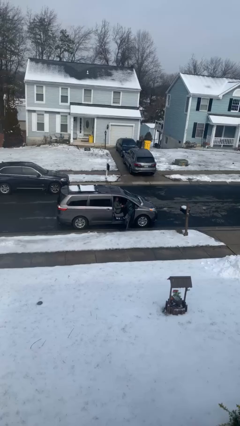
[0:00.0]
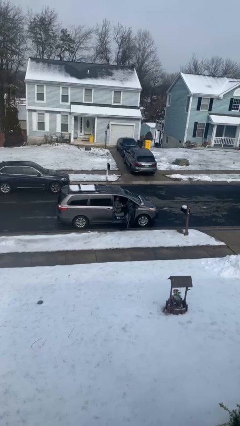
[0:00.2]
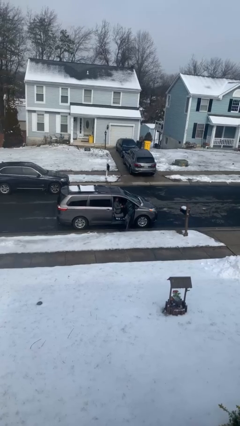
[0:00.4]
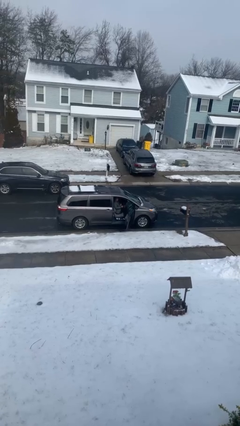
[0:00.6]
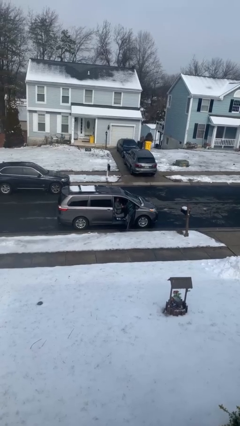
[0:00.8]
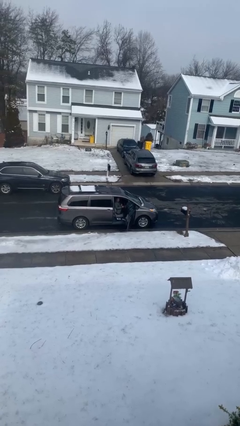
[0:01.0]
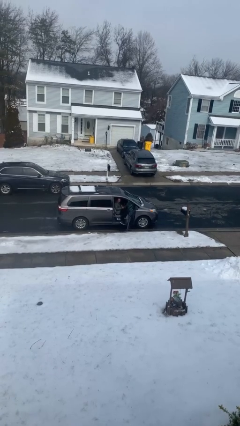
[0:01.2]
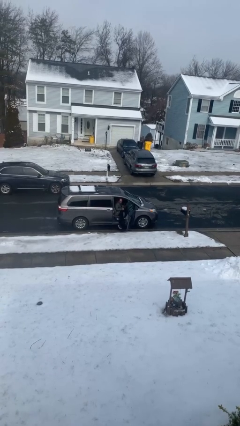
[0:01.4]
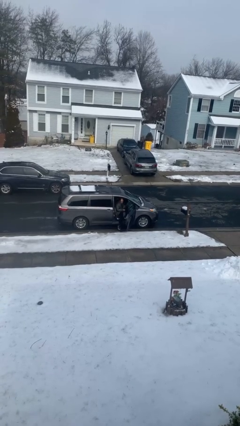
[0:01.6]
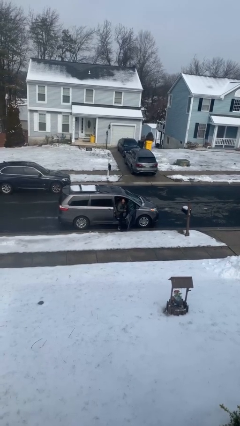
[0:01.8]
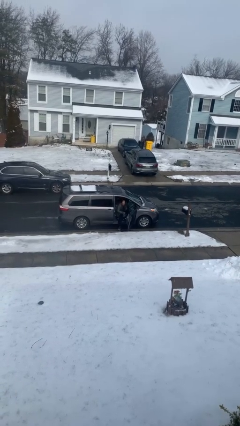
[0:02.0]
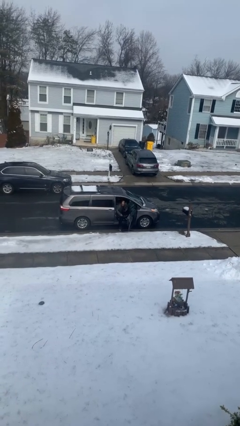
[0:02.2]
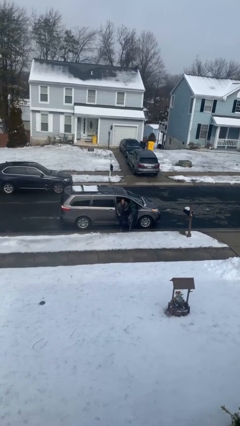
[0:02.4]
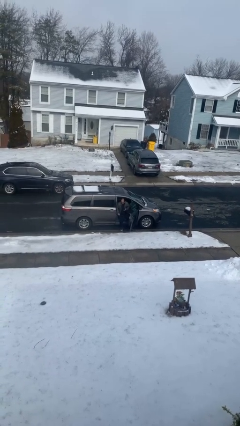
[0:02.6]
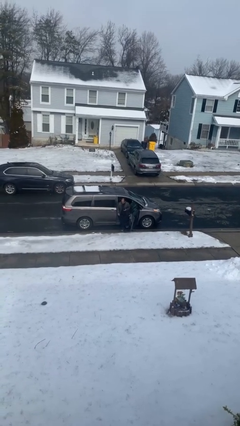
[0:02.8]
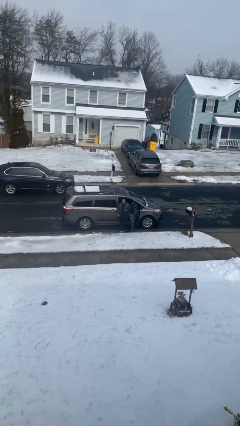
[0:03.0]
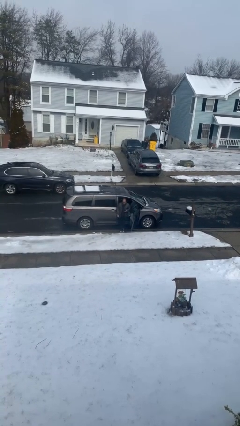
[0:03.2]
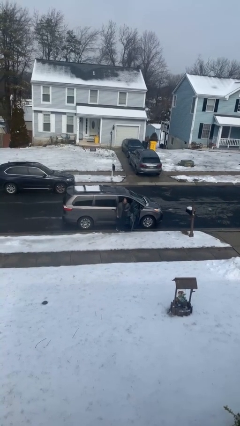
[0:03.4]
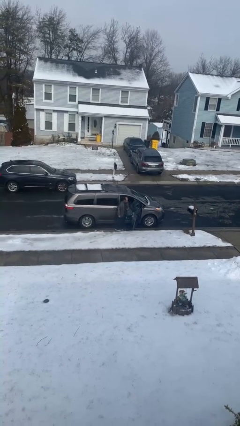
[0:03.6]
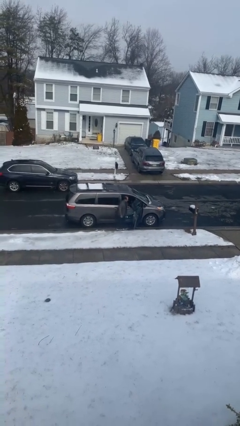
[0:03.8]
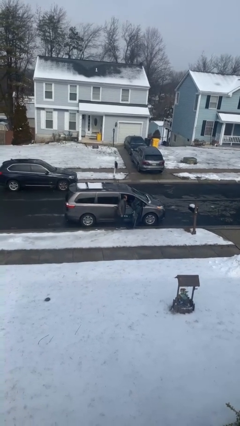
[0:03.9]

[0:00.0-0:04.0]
person exits car

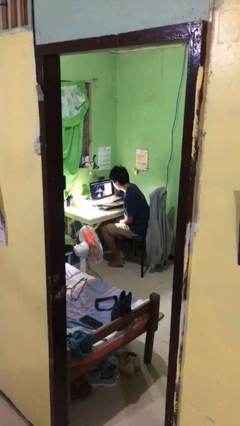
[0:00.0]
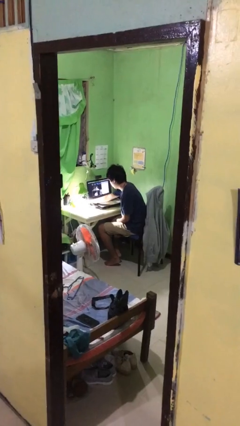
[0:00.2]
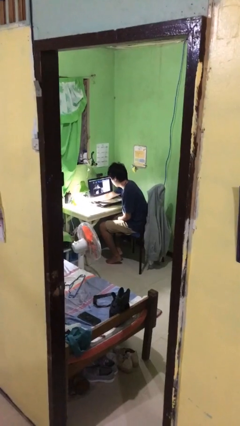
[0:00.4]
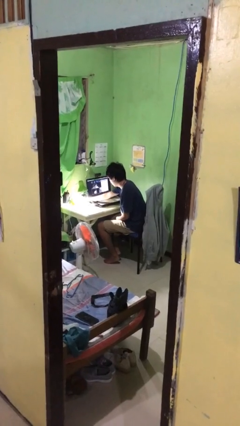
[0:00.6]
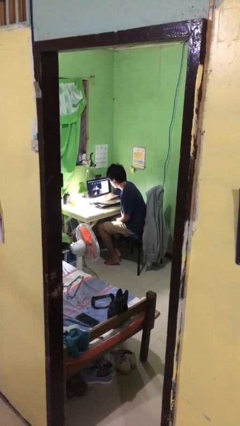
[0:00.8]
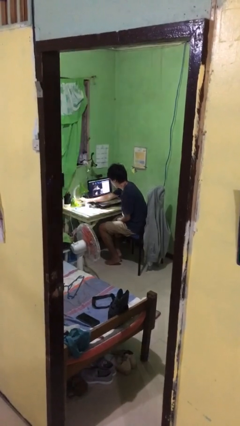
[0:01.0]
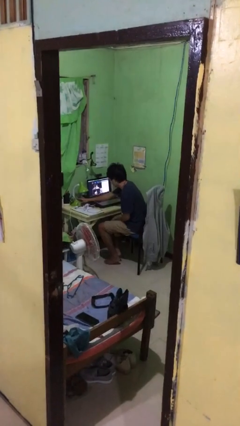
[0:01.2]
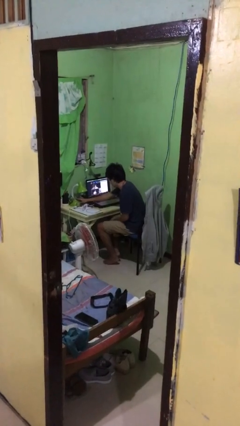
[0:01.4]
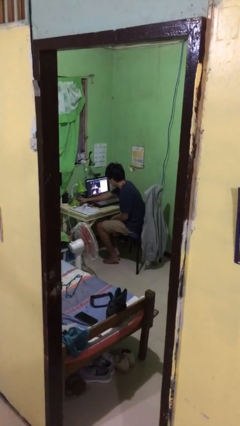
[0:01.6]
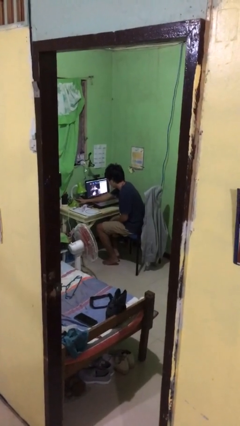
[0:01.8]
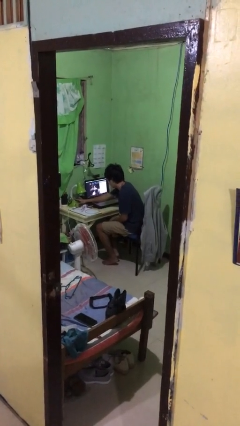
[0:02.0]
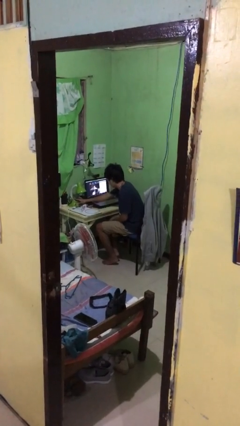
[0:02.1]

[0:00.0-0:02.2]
person turns off lamp

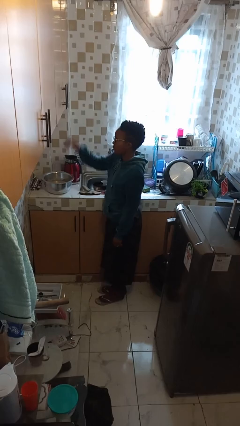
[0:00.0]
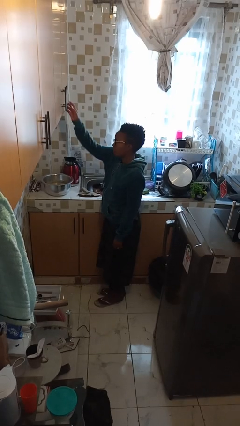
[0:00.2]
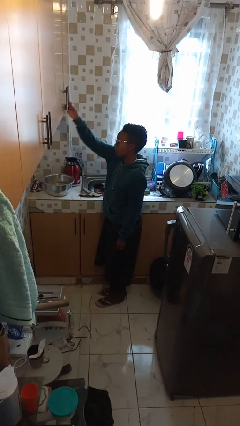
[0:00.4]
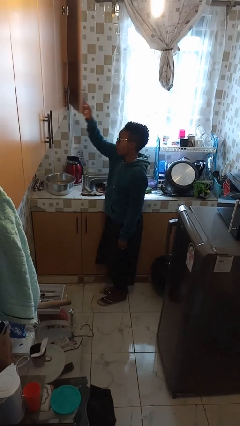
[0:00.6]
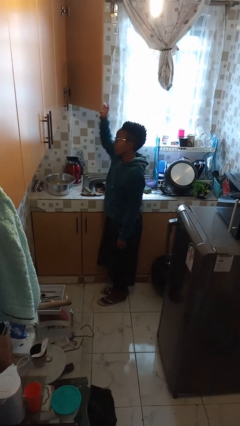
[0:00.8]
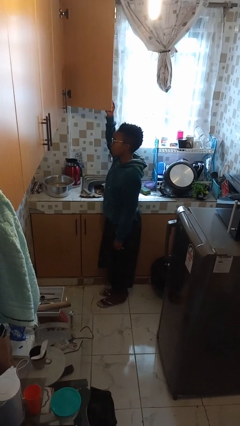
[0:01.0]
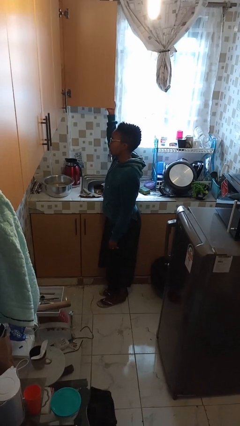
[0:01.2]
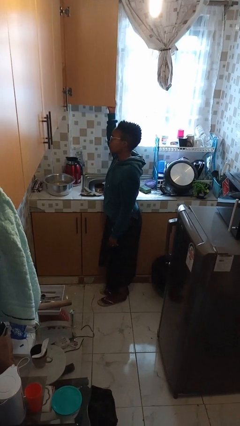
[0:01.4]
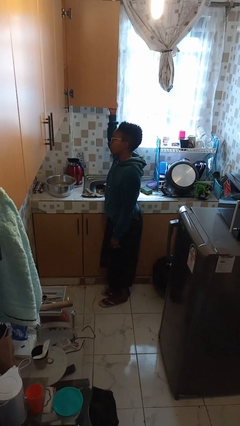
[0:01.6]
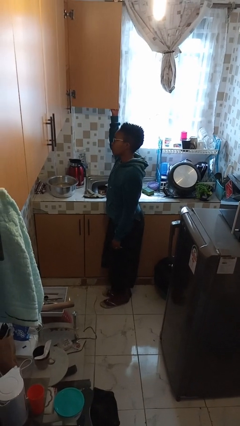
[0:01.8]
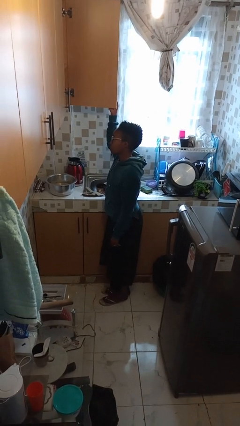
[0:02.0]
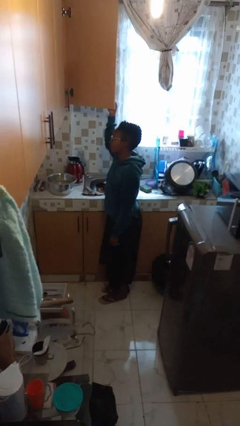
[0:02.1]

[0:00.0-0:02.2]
person opens cabinet

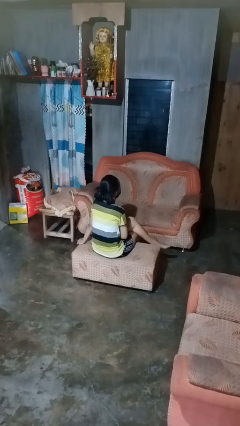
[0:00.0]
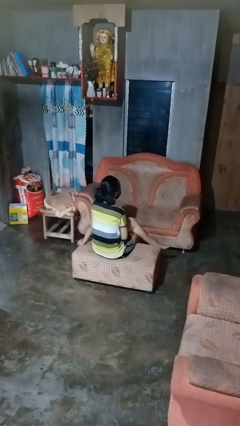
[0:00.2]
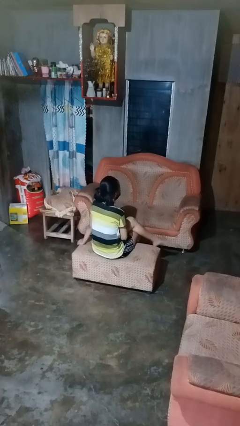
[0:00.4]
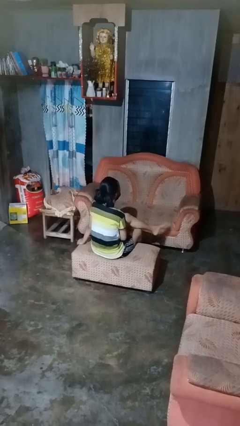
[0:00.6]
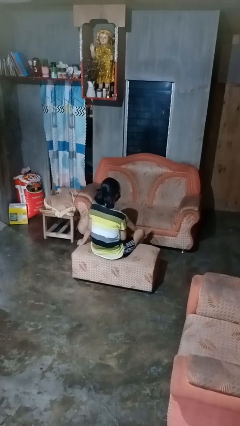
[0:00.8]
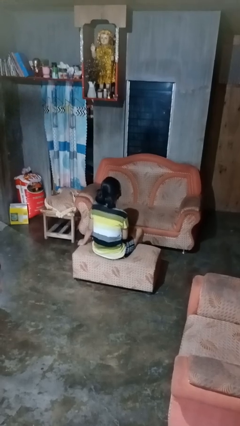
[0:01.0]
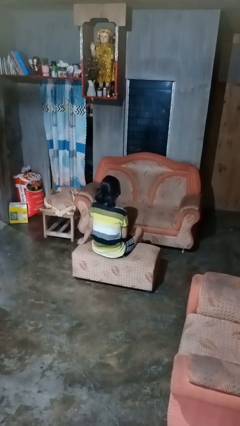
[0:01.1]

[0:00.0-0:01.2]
person crosses legs

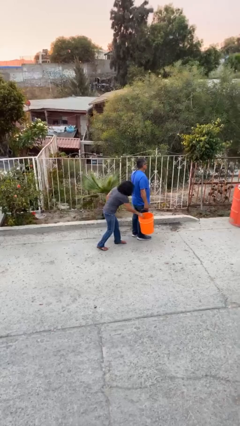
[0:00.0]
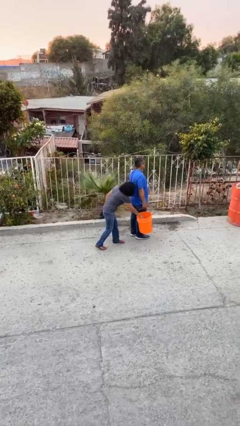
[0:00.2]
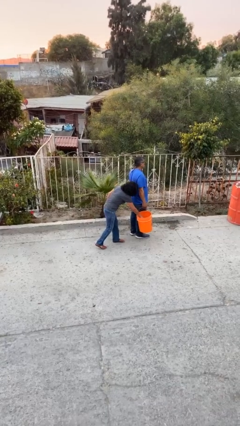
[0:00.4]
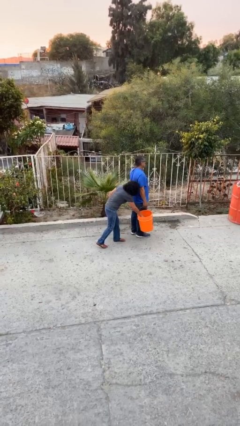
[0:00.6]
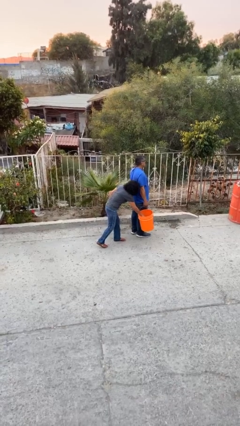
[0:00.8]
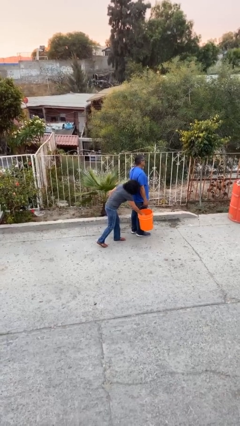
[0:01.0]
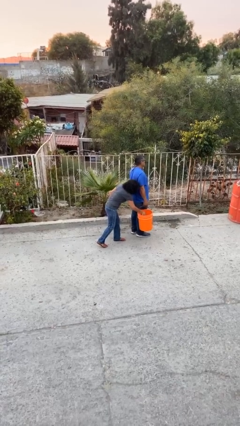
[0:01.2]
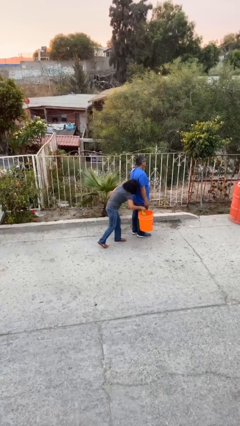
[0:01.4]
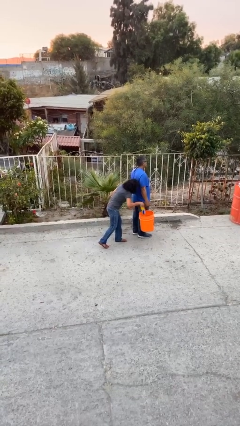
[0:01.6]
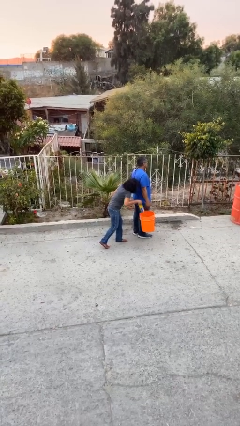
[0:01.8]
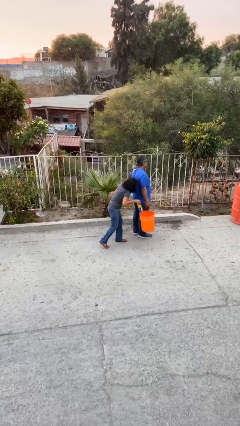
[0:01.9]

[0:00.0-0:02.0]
person steals object from person

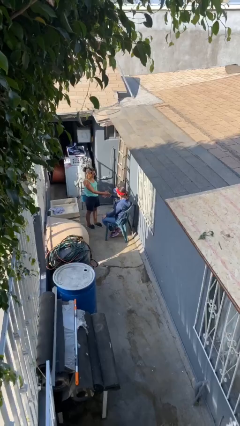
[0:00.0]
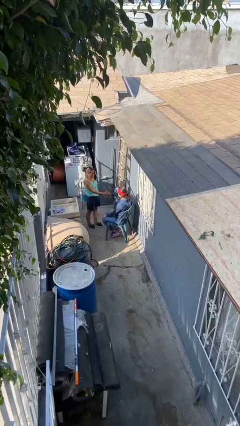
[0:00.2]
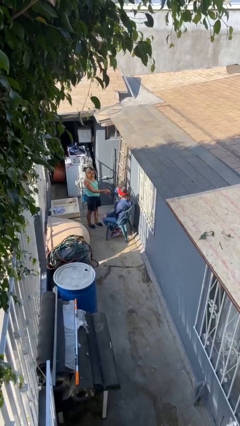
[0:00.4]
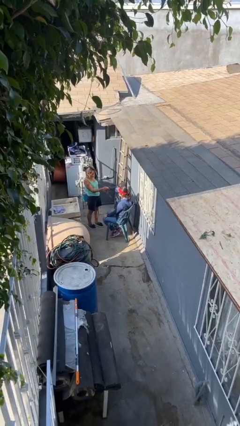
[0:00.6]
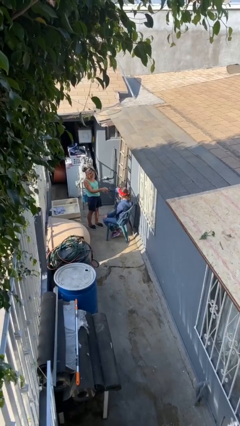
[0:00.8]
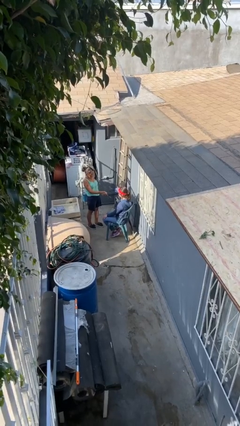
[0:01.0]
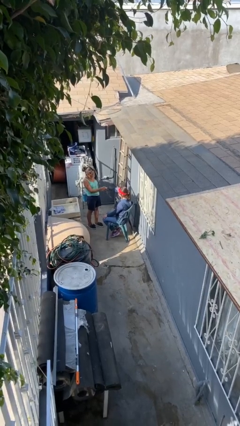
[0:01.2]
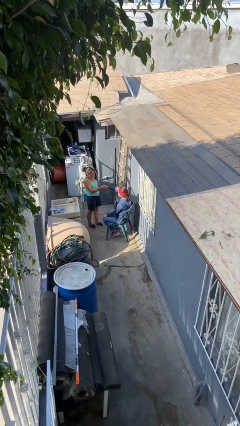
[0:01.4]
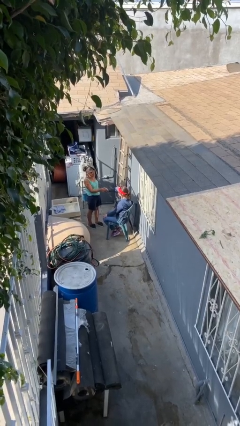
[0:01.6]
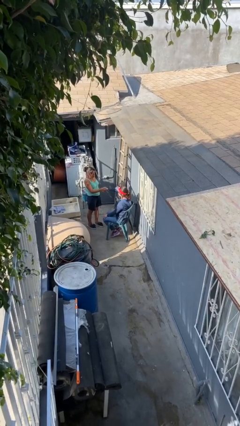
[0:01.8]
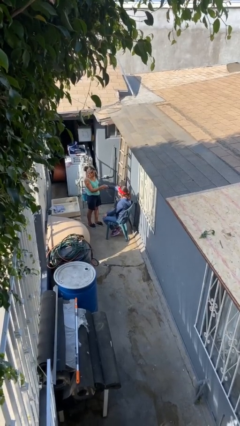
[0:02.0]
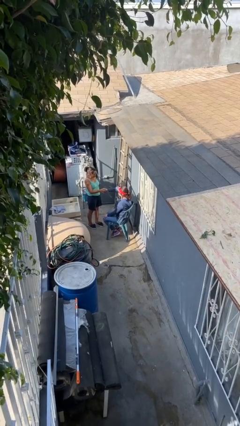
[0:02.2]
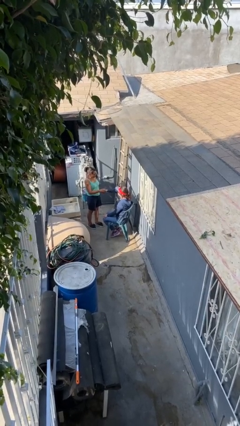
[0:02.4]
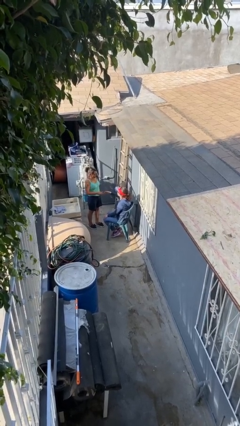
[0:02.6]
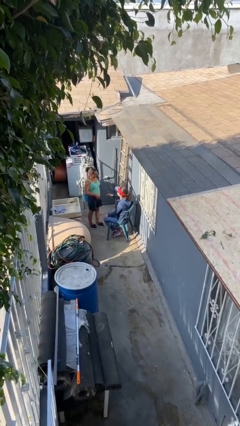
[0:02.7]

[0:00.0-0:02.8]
person shakes hand

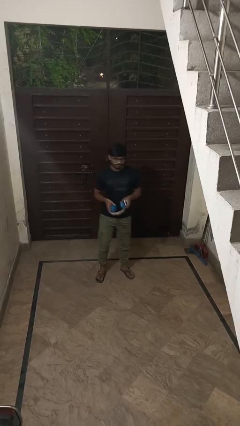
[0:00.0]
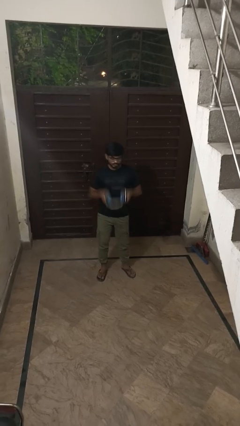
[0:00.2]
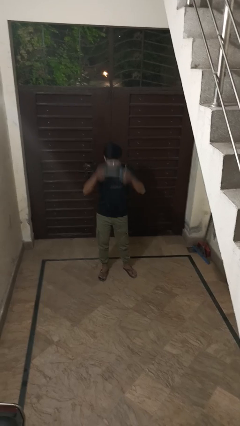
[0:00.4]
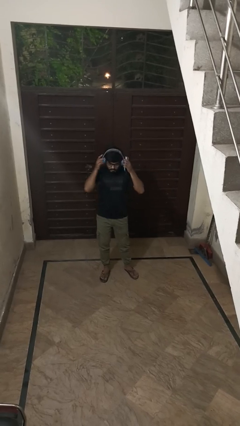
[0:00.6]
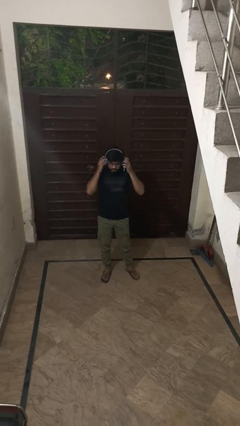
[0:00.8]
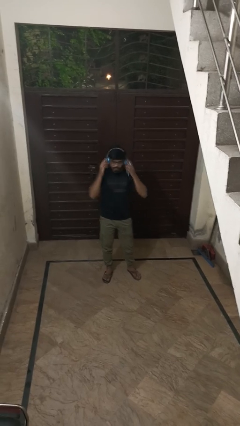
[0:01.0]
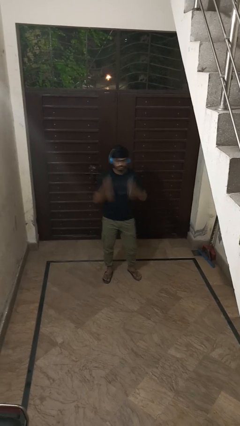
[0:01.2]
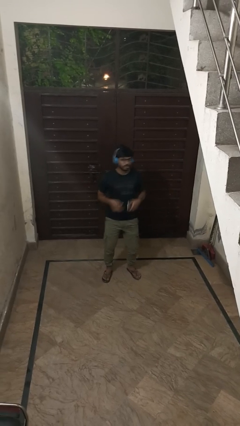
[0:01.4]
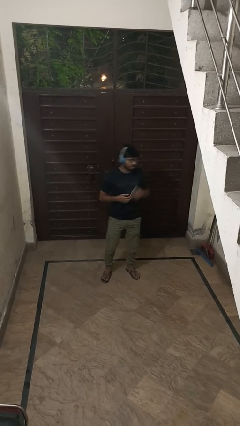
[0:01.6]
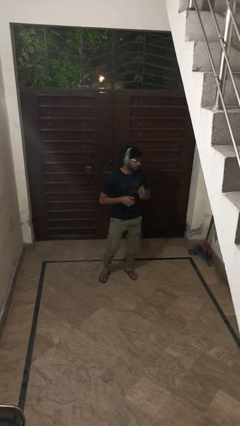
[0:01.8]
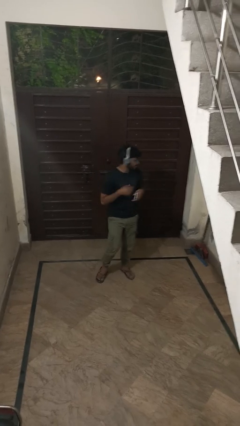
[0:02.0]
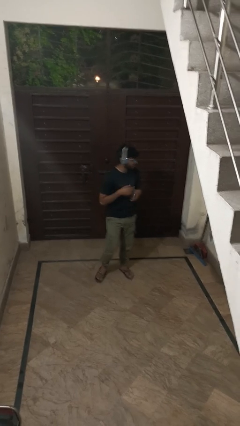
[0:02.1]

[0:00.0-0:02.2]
person puts on headphones
